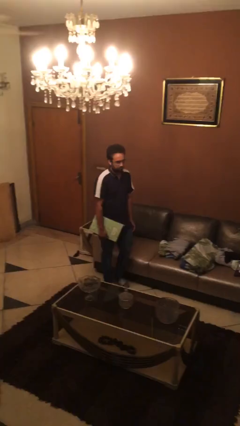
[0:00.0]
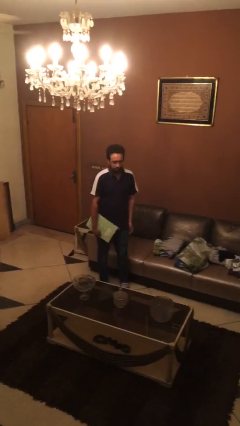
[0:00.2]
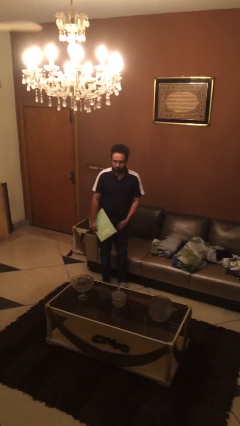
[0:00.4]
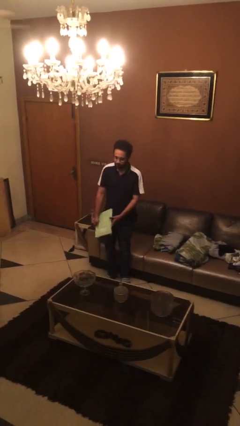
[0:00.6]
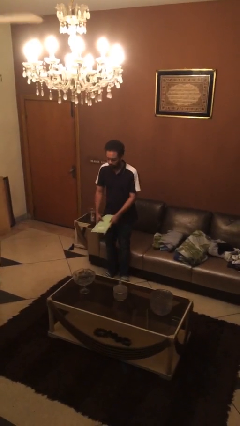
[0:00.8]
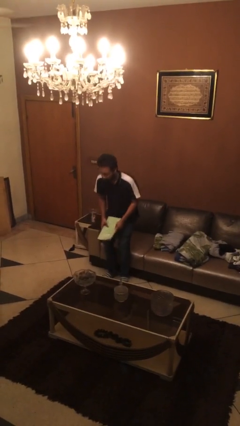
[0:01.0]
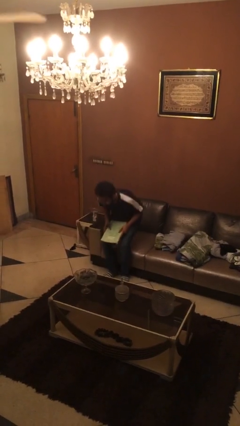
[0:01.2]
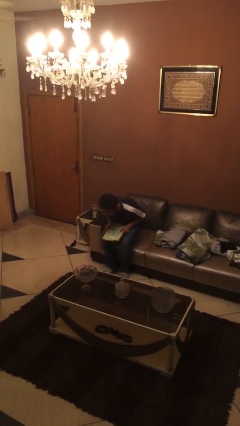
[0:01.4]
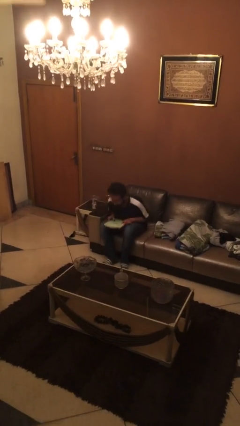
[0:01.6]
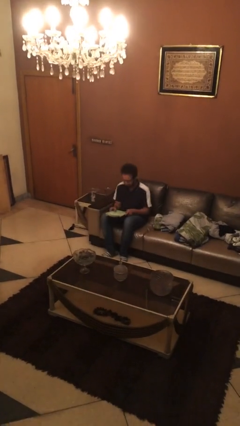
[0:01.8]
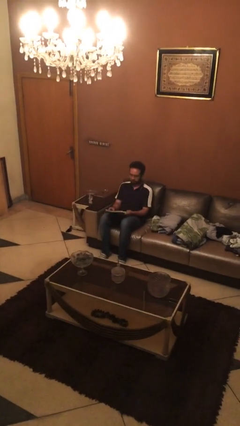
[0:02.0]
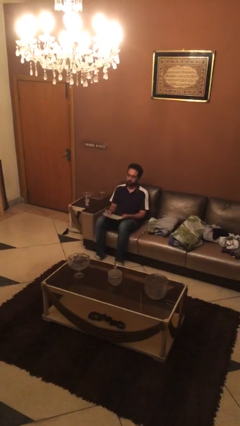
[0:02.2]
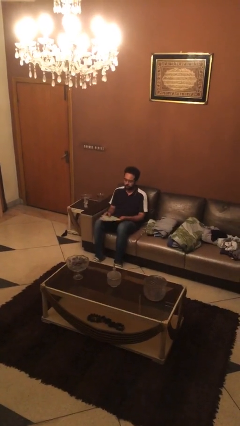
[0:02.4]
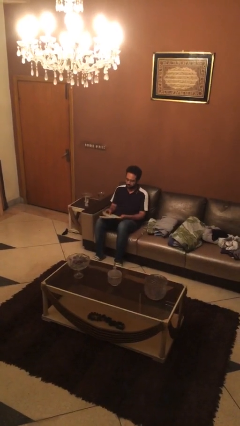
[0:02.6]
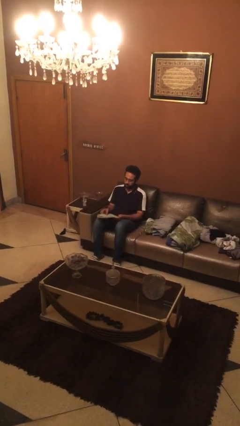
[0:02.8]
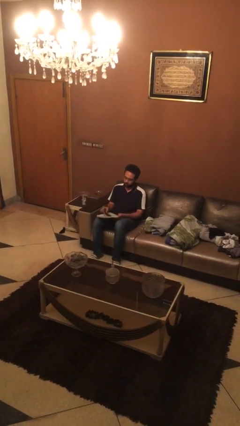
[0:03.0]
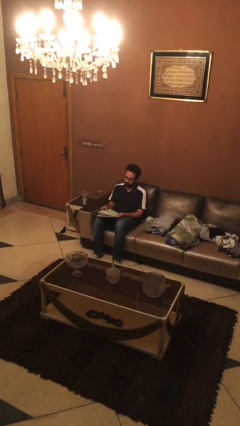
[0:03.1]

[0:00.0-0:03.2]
person sits down

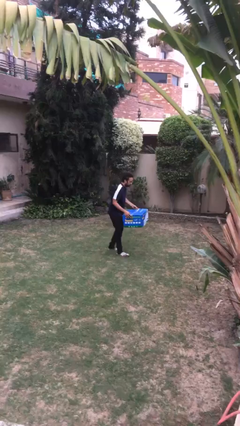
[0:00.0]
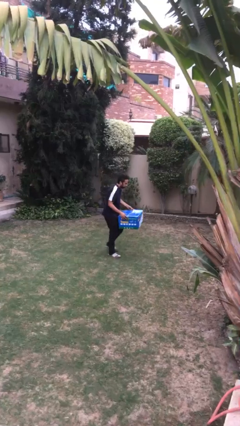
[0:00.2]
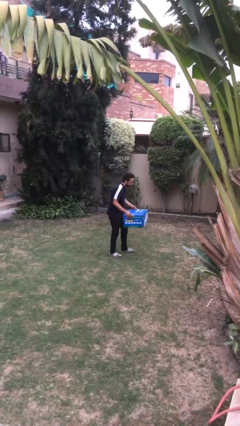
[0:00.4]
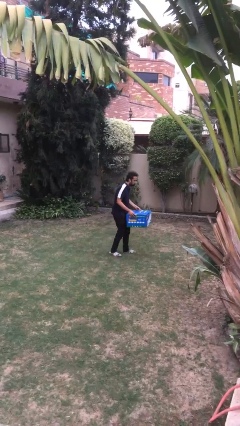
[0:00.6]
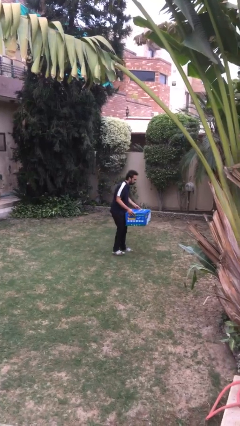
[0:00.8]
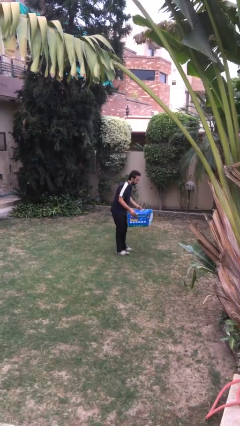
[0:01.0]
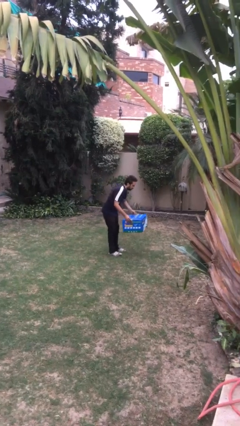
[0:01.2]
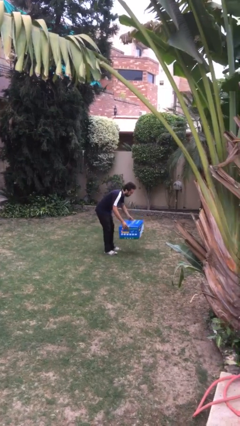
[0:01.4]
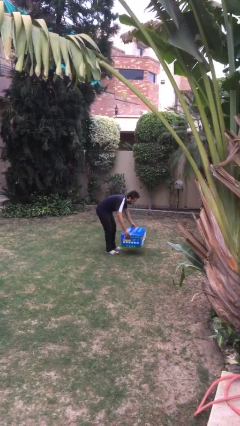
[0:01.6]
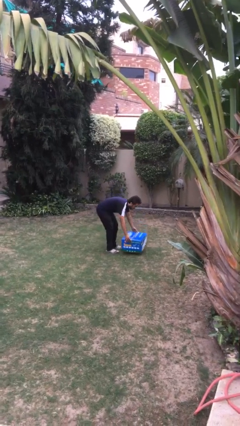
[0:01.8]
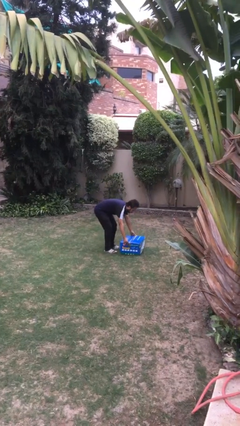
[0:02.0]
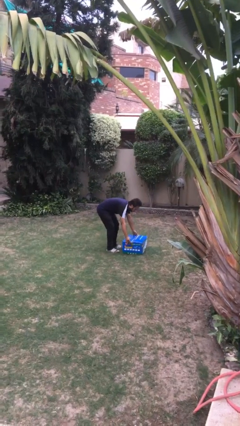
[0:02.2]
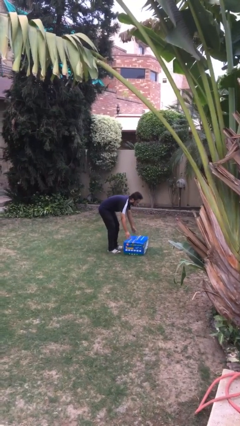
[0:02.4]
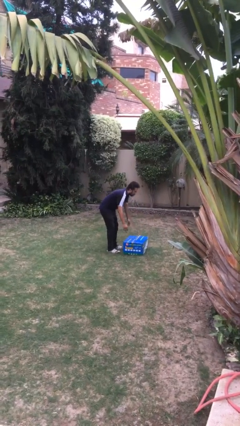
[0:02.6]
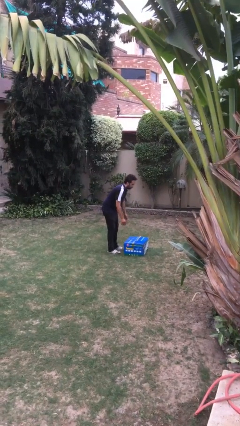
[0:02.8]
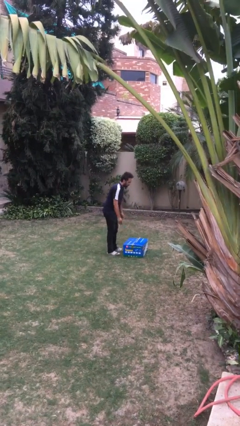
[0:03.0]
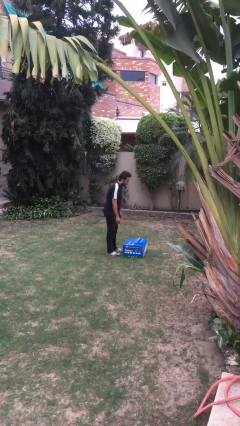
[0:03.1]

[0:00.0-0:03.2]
person puts down object on floor

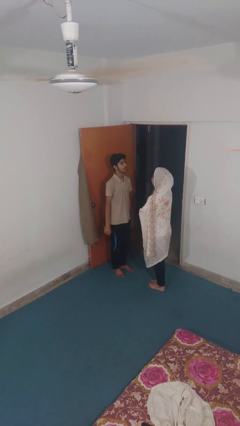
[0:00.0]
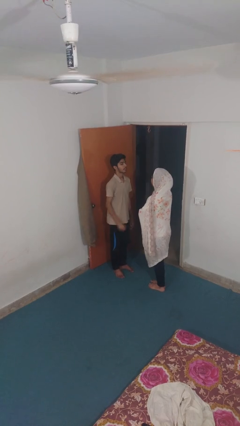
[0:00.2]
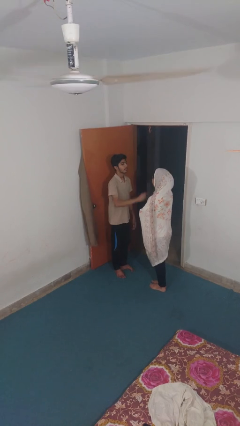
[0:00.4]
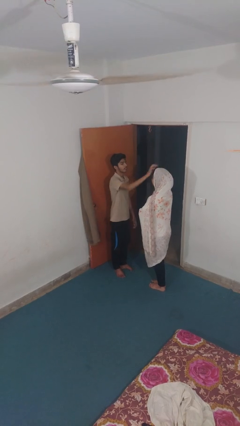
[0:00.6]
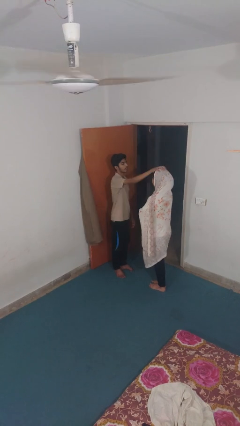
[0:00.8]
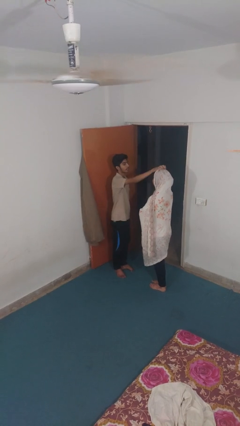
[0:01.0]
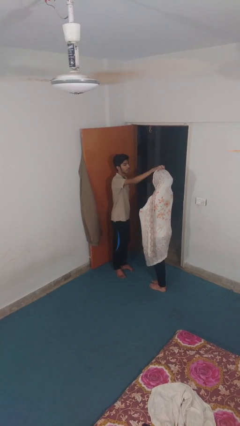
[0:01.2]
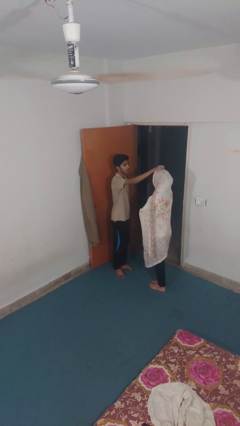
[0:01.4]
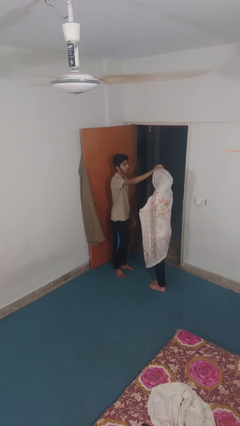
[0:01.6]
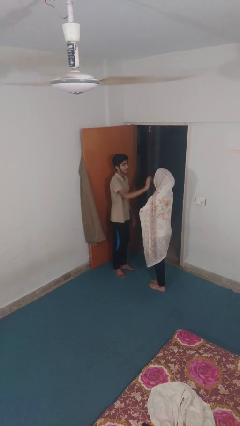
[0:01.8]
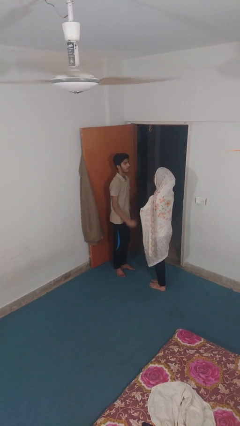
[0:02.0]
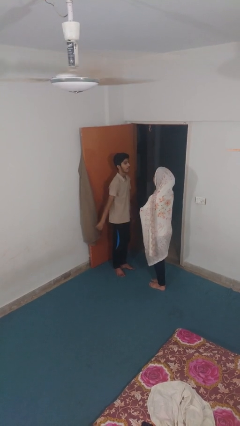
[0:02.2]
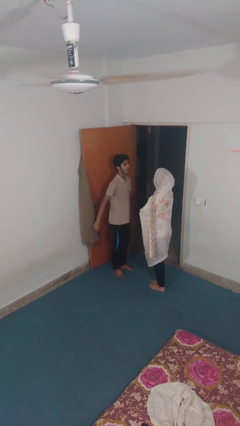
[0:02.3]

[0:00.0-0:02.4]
person grabs person by hair

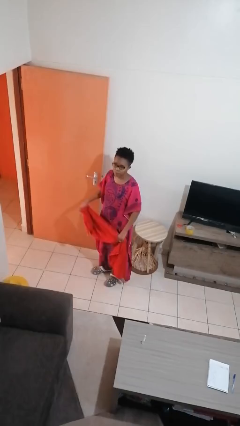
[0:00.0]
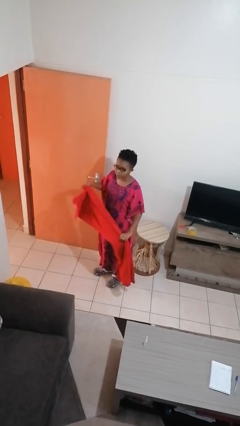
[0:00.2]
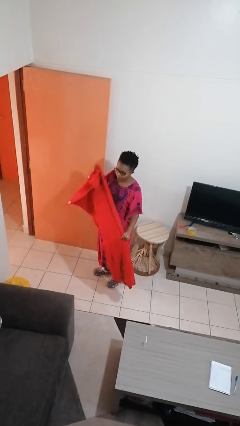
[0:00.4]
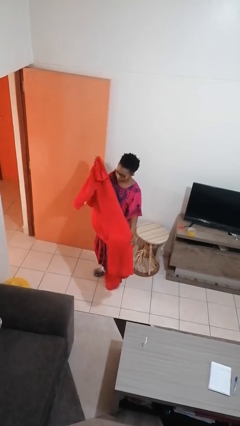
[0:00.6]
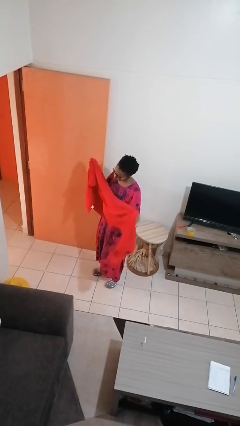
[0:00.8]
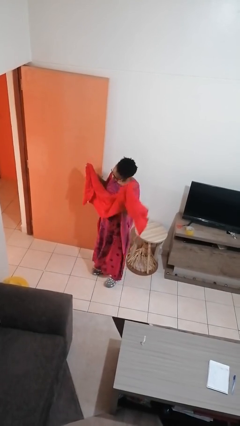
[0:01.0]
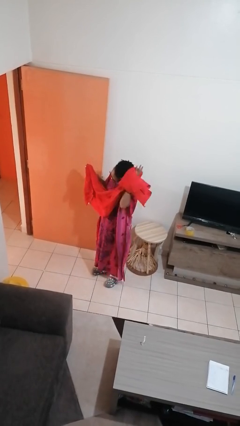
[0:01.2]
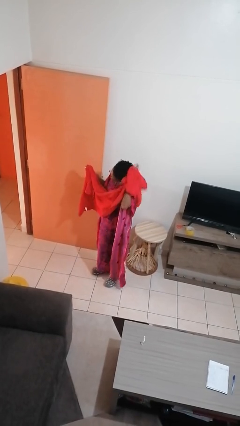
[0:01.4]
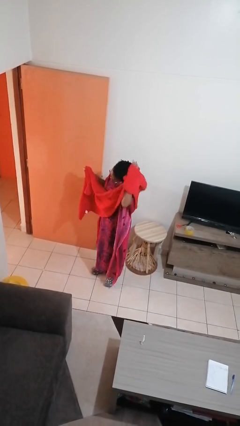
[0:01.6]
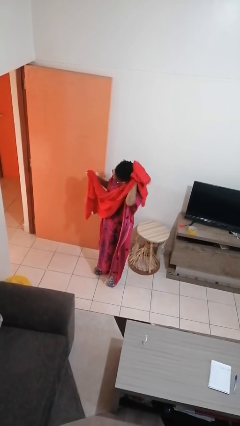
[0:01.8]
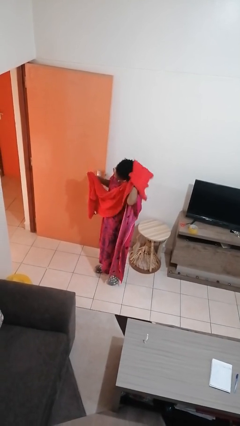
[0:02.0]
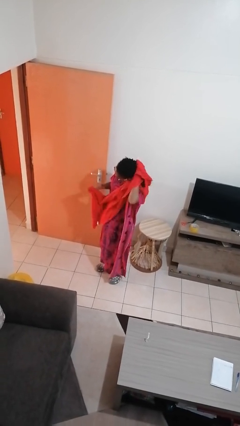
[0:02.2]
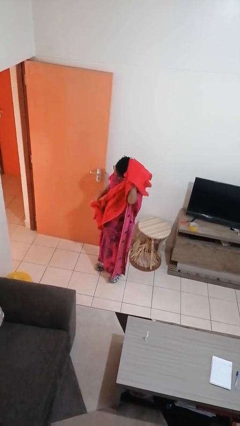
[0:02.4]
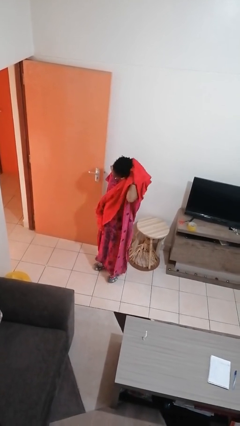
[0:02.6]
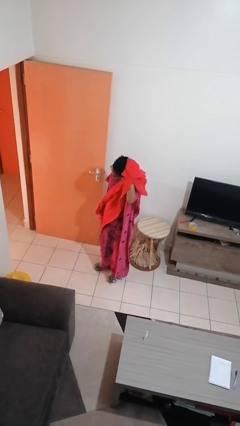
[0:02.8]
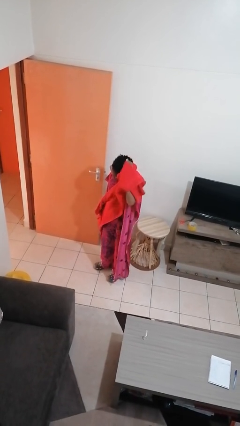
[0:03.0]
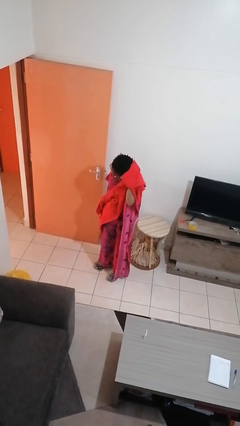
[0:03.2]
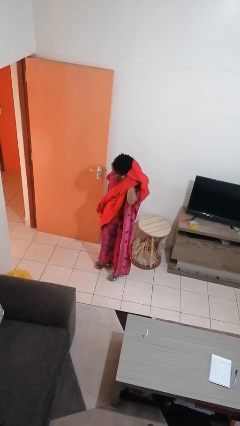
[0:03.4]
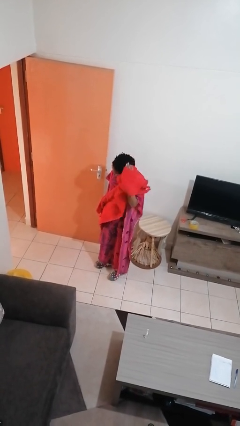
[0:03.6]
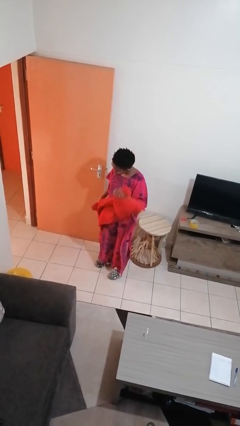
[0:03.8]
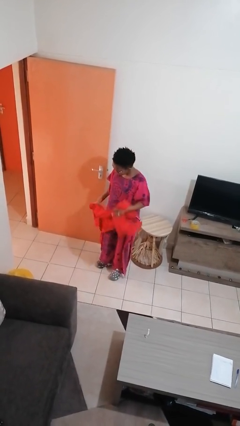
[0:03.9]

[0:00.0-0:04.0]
person dries hair with towel

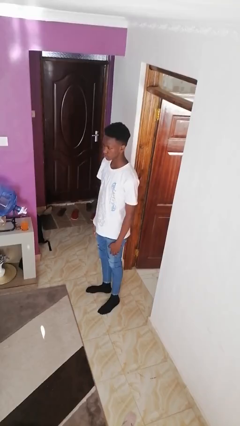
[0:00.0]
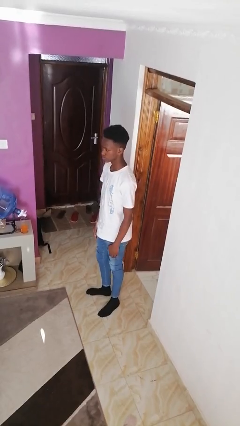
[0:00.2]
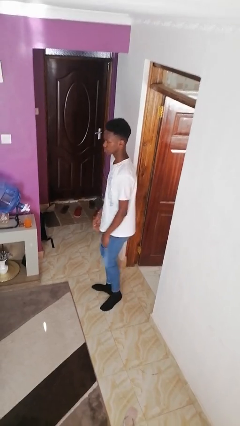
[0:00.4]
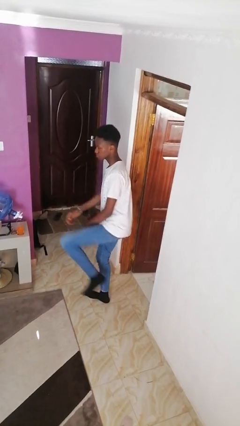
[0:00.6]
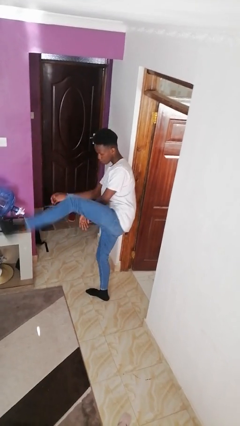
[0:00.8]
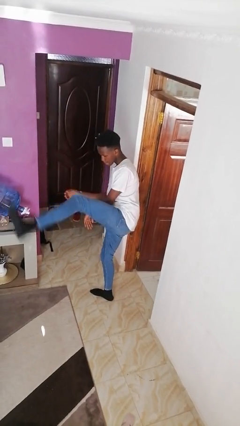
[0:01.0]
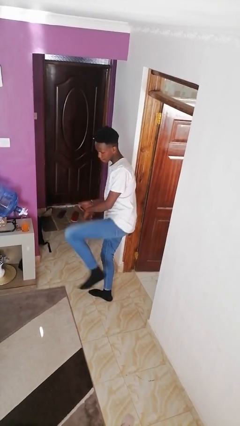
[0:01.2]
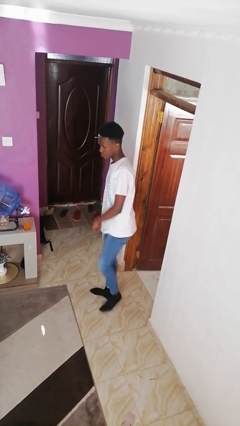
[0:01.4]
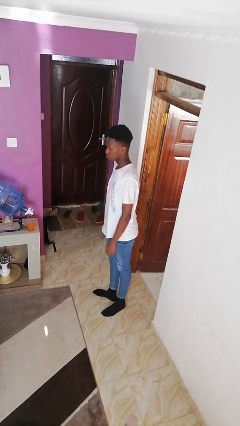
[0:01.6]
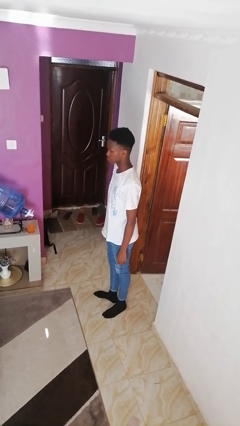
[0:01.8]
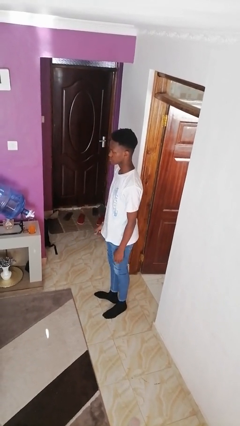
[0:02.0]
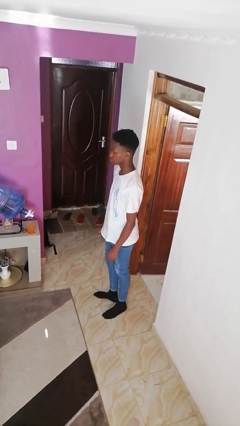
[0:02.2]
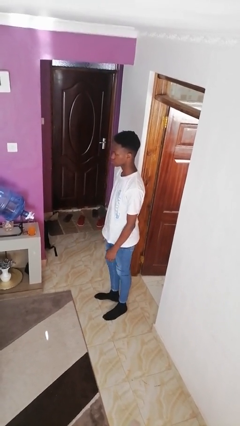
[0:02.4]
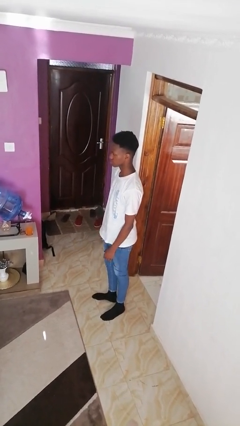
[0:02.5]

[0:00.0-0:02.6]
person karate kicks

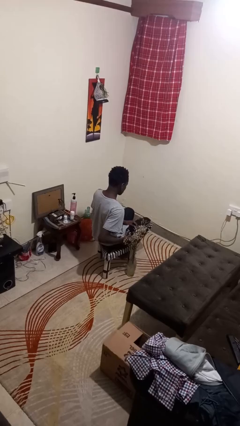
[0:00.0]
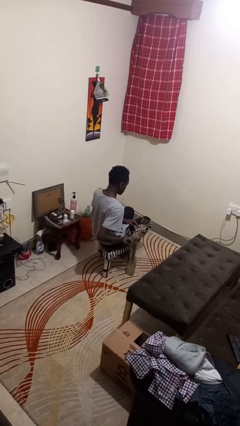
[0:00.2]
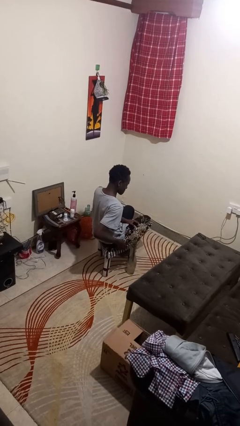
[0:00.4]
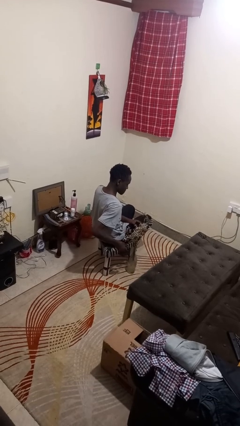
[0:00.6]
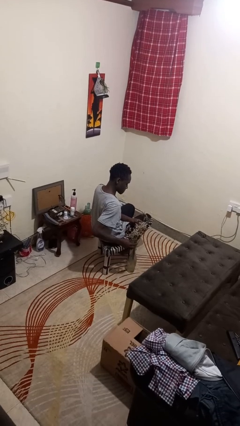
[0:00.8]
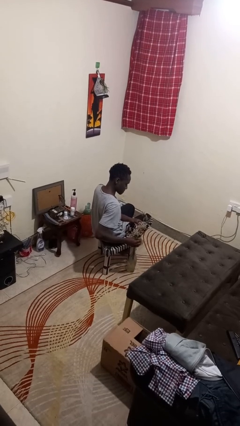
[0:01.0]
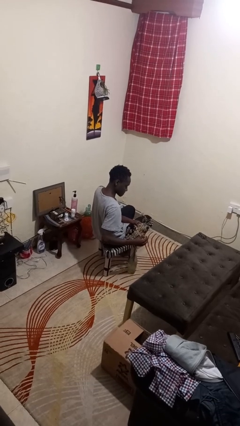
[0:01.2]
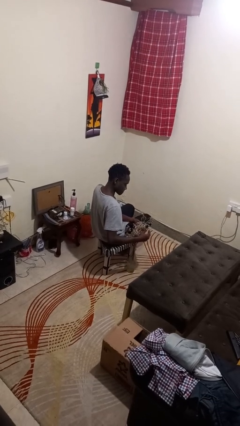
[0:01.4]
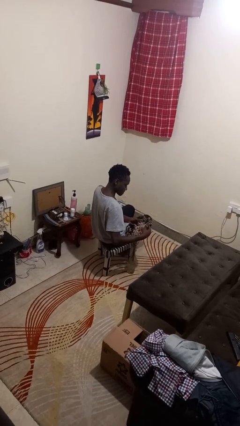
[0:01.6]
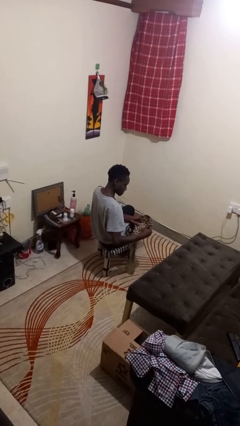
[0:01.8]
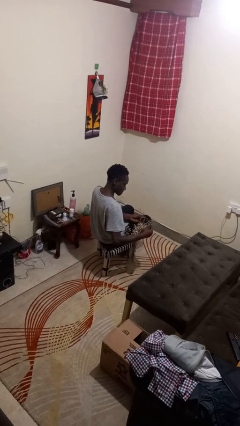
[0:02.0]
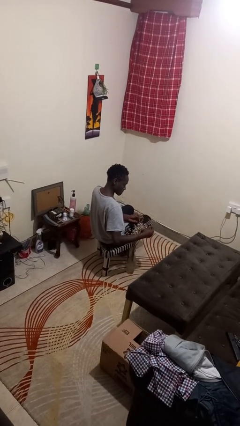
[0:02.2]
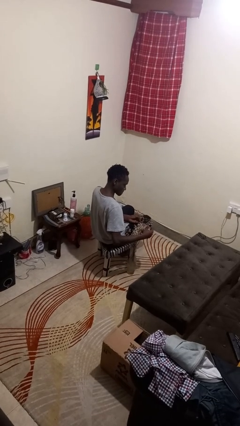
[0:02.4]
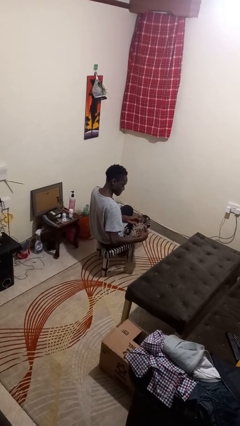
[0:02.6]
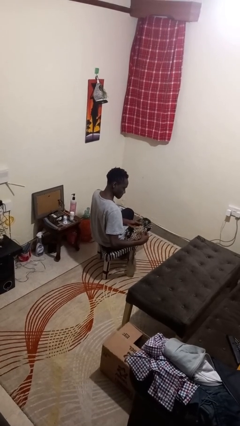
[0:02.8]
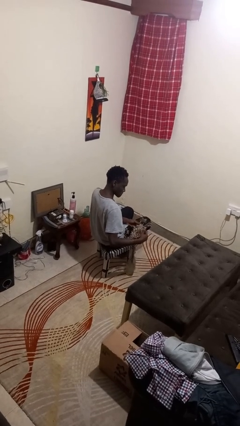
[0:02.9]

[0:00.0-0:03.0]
person arranges flowers in vase
